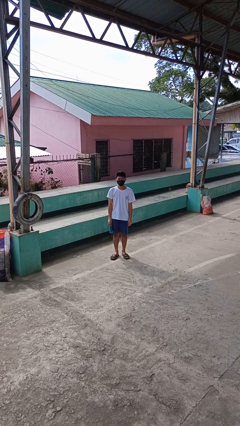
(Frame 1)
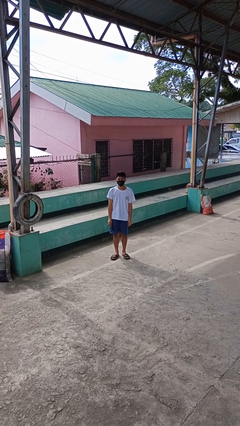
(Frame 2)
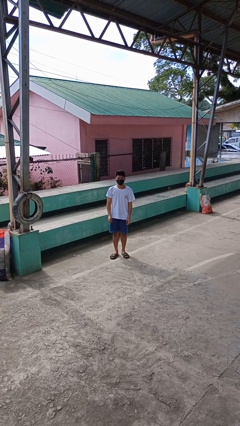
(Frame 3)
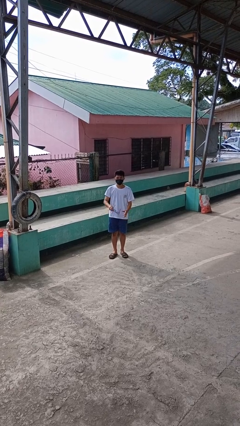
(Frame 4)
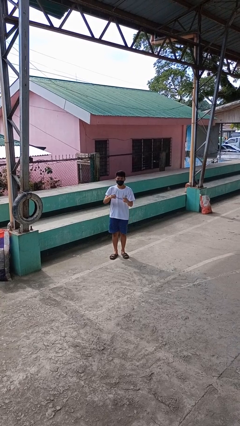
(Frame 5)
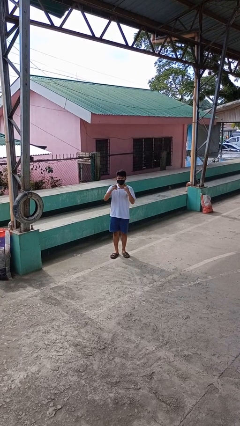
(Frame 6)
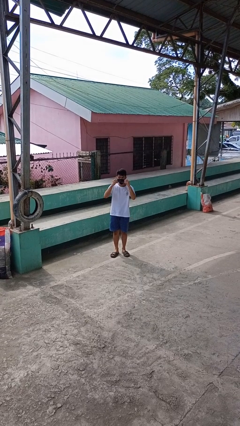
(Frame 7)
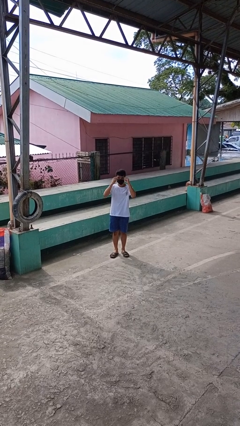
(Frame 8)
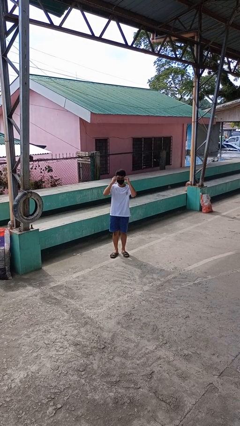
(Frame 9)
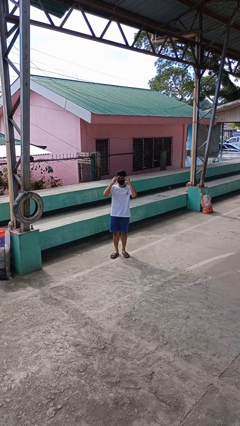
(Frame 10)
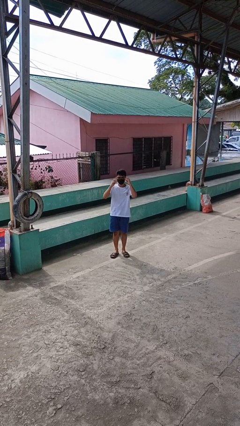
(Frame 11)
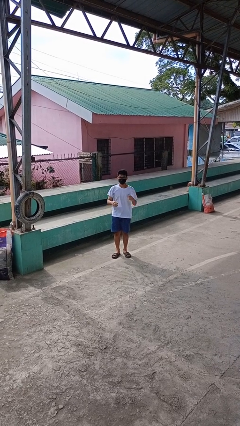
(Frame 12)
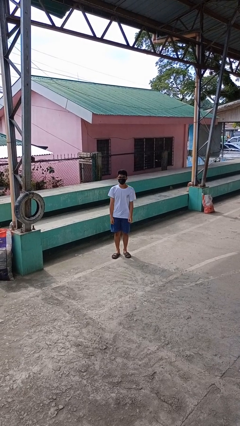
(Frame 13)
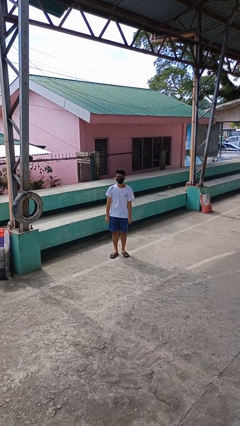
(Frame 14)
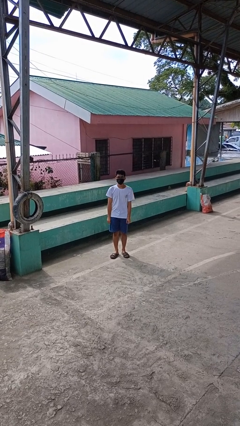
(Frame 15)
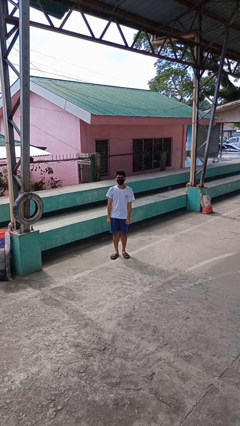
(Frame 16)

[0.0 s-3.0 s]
person puts on glasses

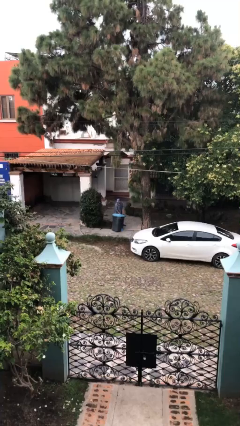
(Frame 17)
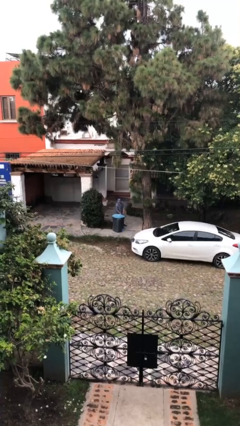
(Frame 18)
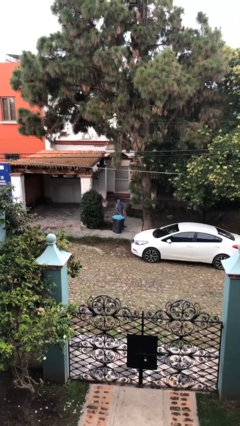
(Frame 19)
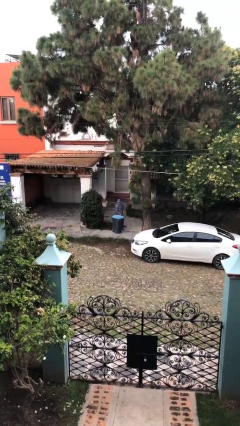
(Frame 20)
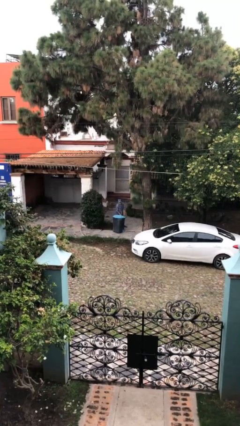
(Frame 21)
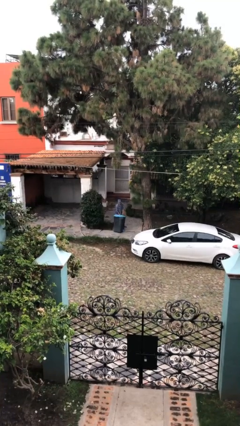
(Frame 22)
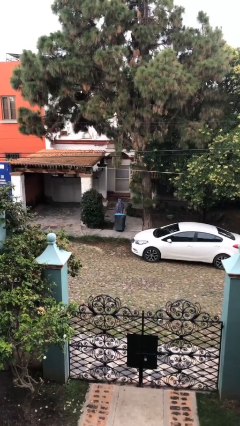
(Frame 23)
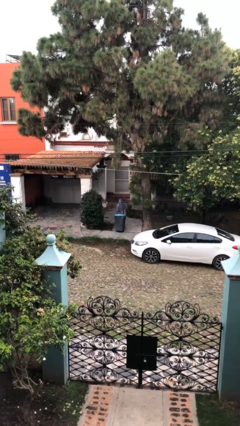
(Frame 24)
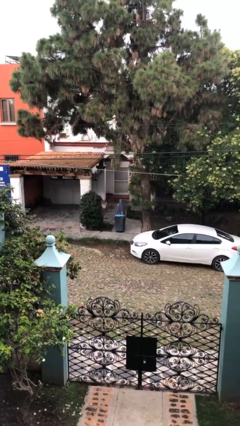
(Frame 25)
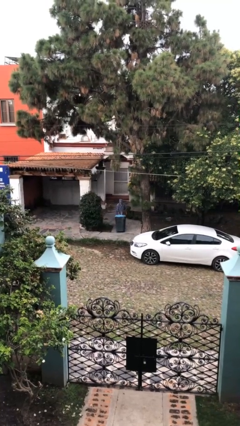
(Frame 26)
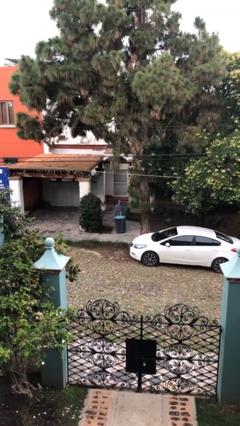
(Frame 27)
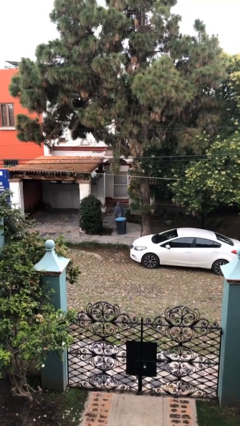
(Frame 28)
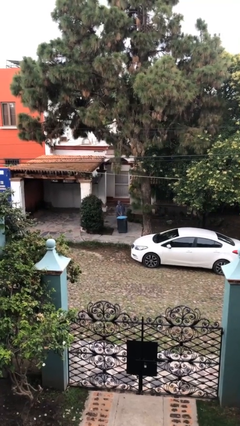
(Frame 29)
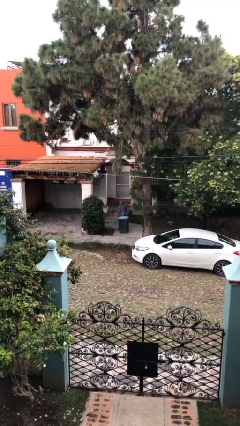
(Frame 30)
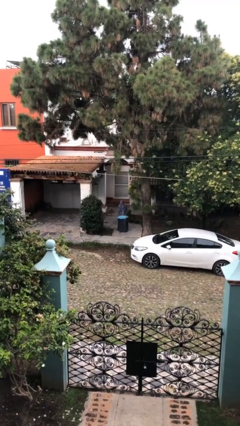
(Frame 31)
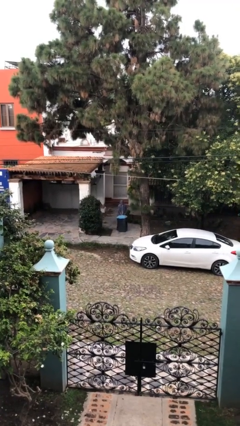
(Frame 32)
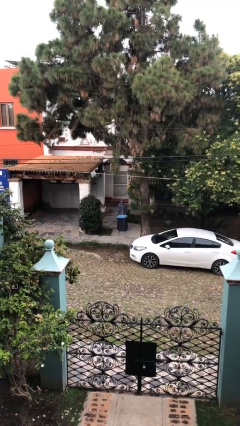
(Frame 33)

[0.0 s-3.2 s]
person pulls wheeled trashcan

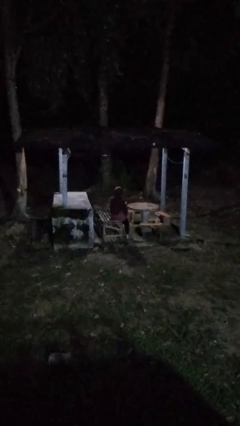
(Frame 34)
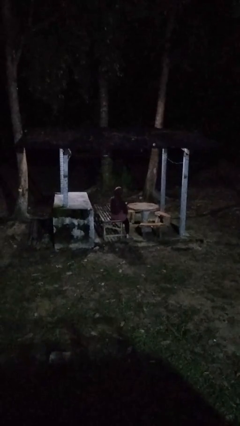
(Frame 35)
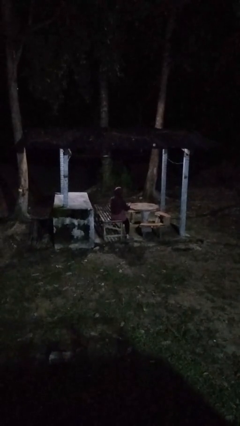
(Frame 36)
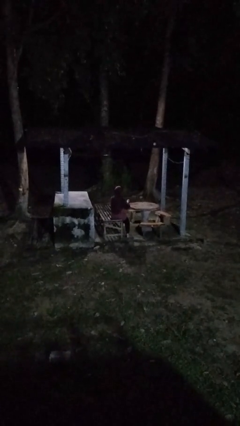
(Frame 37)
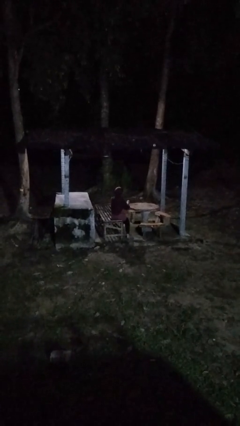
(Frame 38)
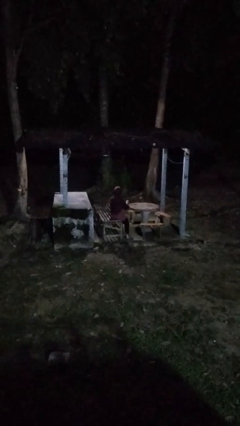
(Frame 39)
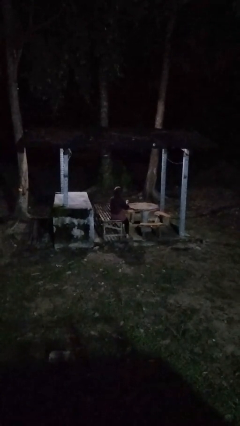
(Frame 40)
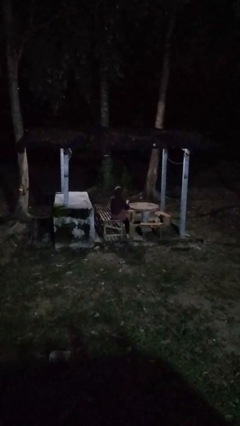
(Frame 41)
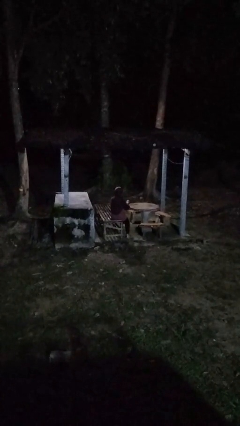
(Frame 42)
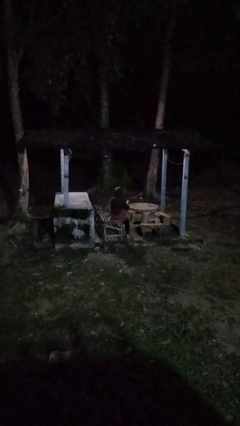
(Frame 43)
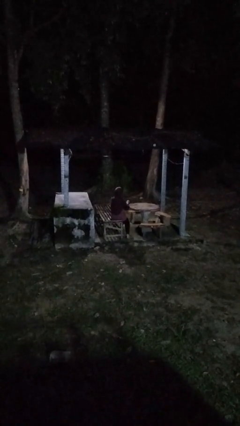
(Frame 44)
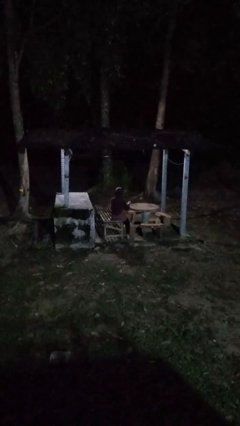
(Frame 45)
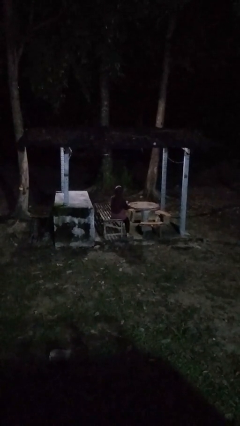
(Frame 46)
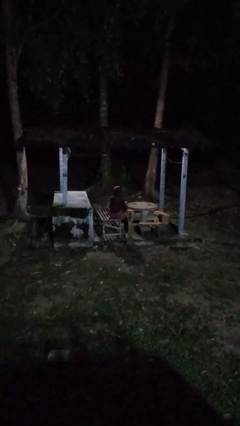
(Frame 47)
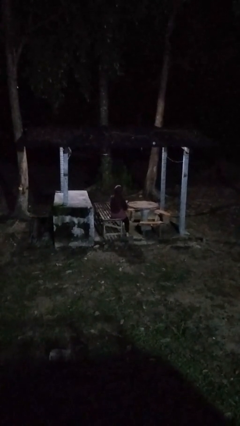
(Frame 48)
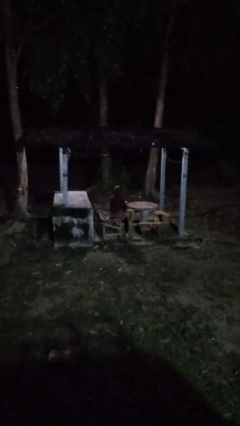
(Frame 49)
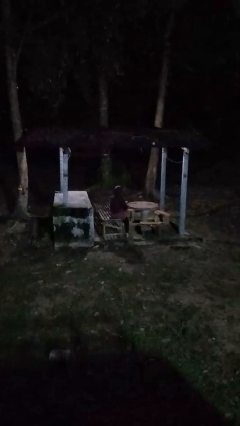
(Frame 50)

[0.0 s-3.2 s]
person paints fingernails

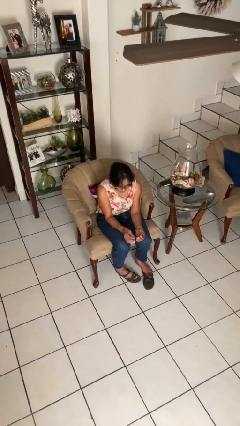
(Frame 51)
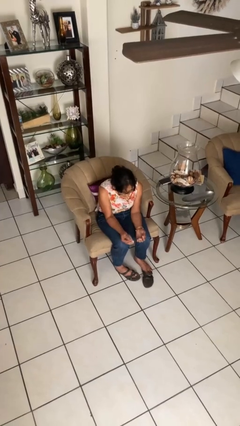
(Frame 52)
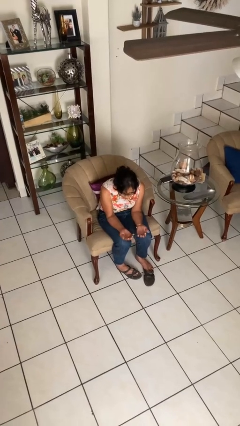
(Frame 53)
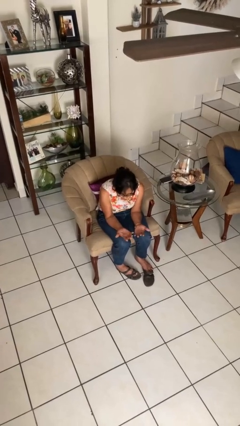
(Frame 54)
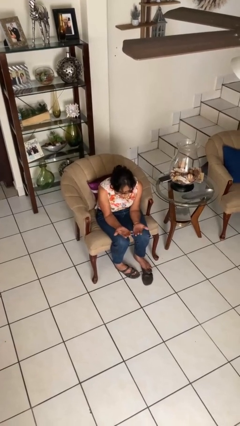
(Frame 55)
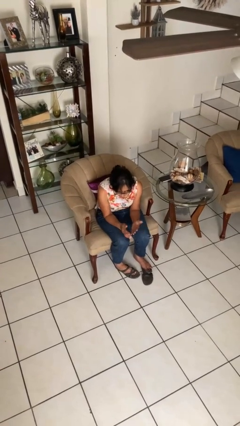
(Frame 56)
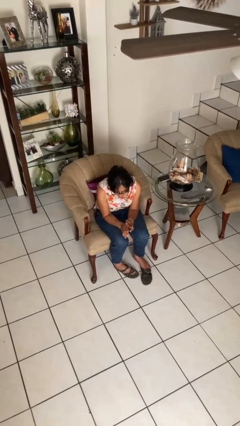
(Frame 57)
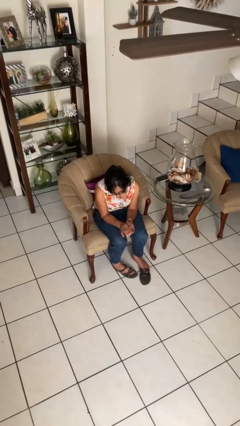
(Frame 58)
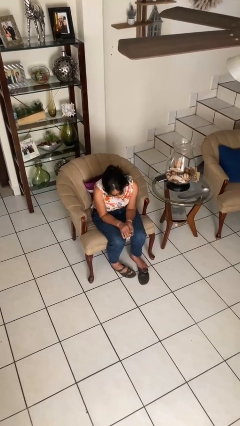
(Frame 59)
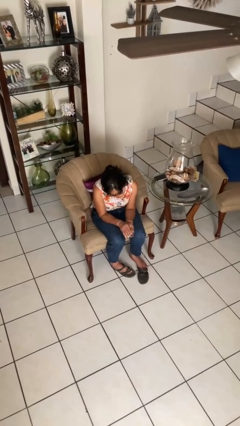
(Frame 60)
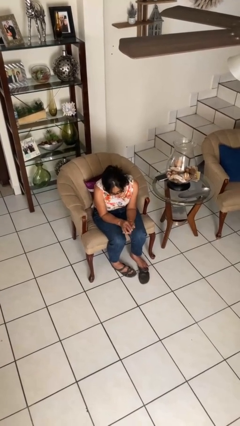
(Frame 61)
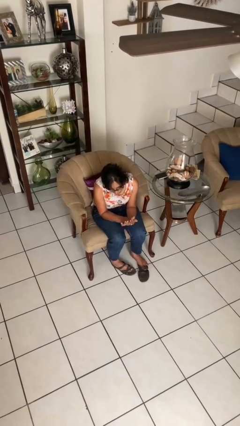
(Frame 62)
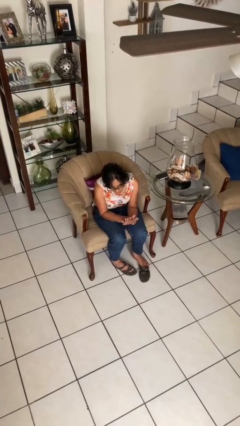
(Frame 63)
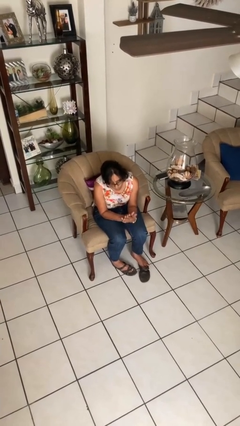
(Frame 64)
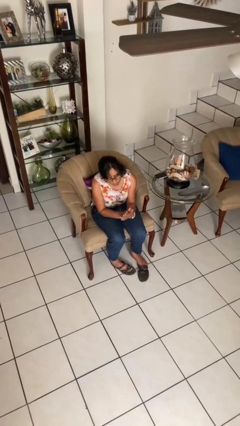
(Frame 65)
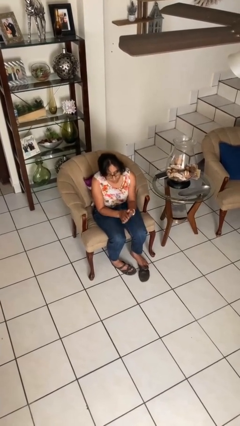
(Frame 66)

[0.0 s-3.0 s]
person looks at hands in lap

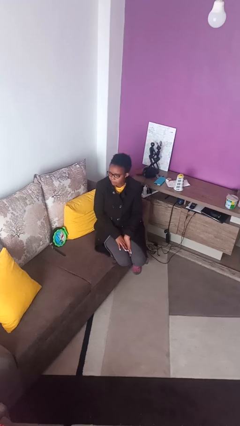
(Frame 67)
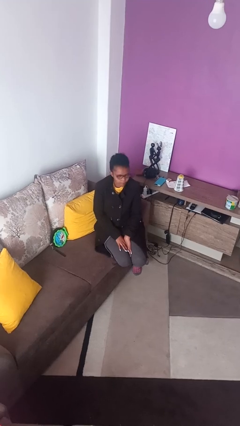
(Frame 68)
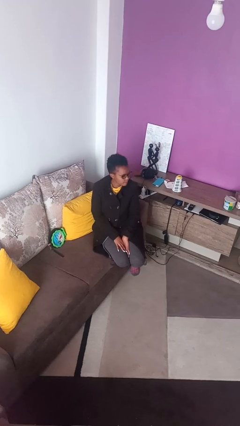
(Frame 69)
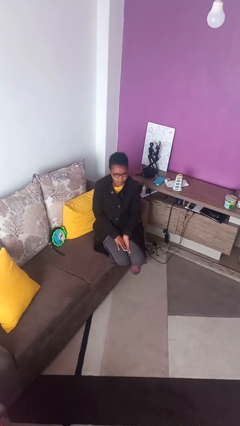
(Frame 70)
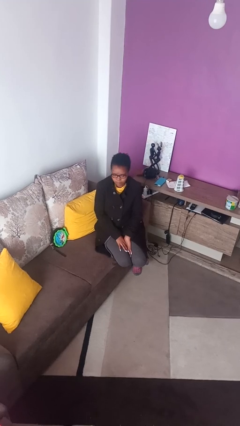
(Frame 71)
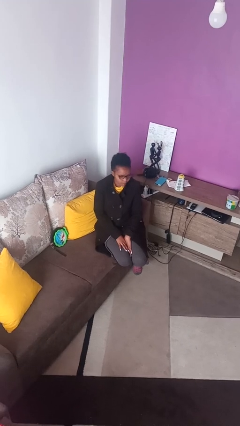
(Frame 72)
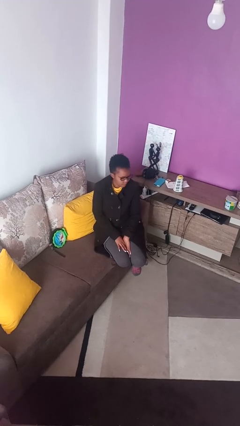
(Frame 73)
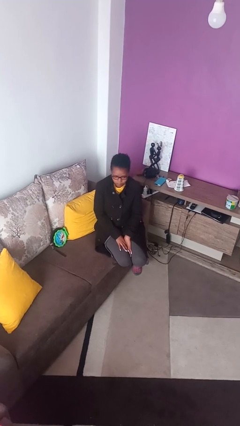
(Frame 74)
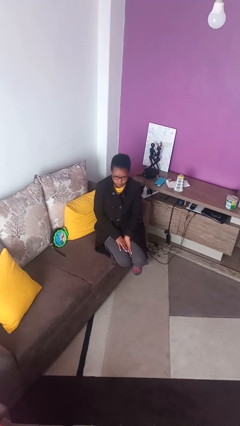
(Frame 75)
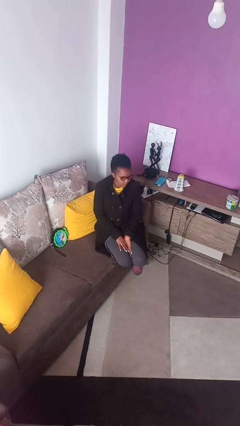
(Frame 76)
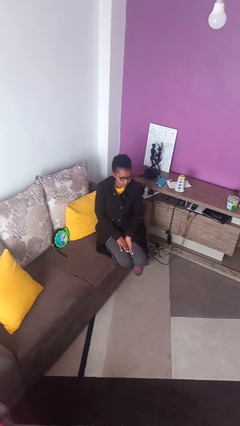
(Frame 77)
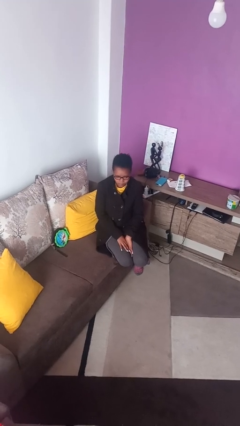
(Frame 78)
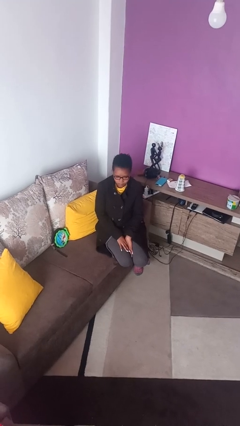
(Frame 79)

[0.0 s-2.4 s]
person shakes head

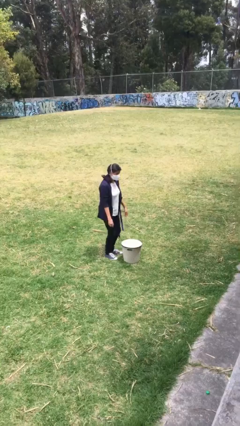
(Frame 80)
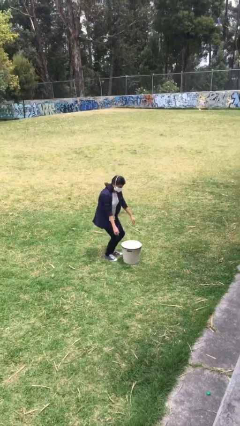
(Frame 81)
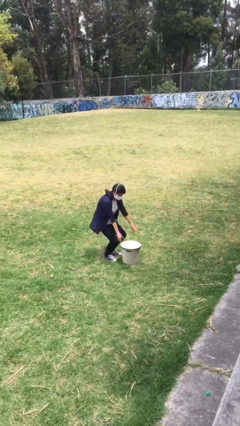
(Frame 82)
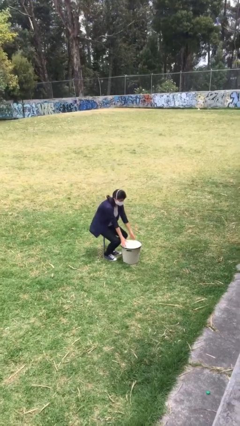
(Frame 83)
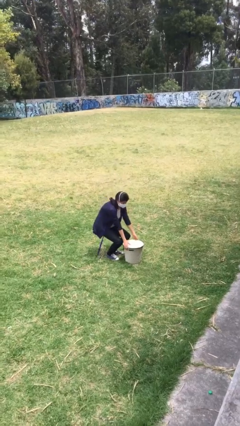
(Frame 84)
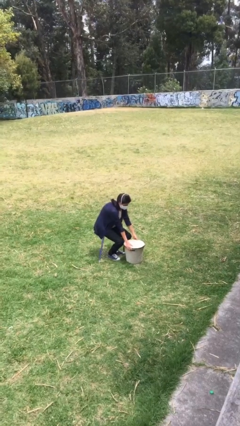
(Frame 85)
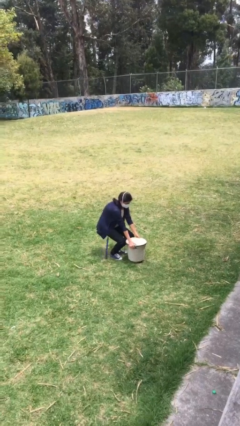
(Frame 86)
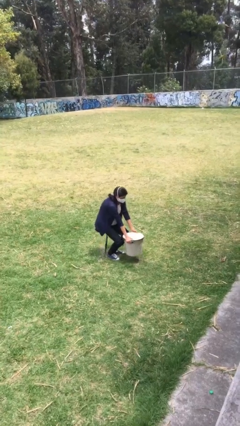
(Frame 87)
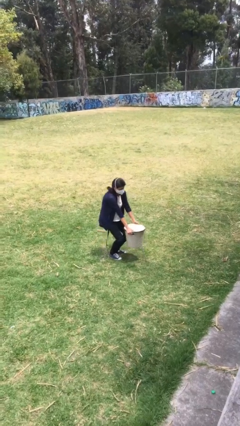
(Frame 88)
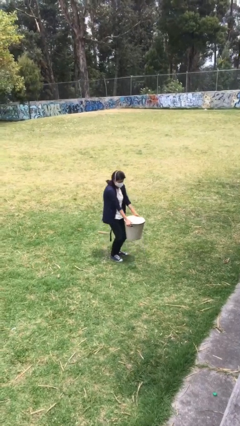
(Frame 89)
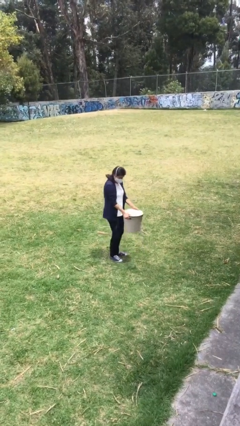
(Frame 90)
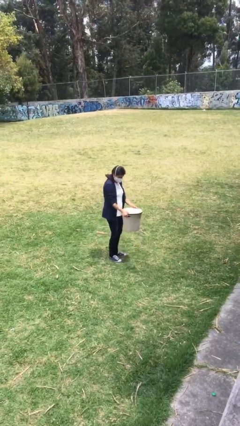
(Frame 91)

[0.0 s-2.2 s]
person picks up object from floor
